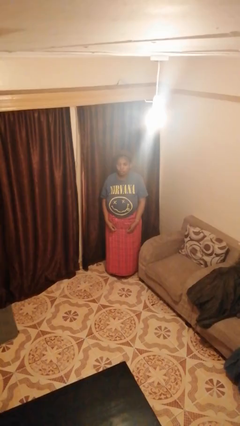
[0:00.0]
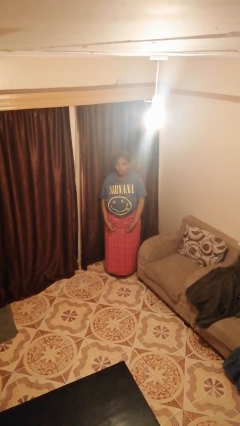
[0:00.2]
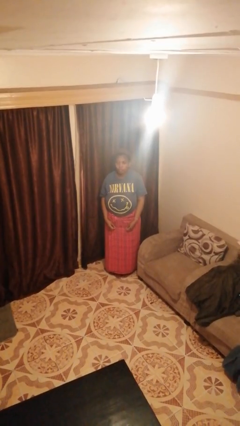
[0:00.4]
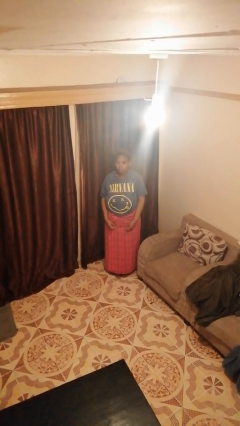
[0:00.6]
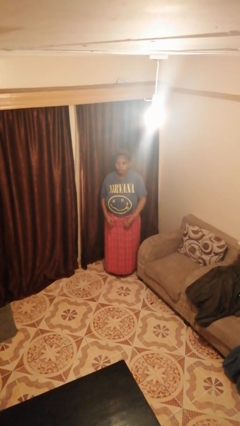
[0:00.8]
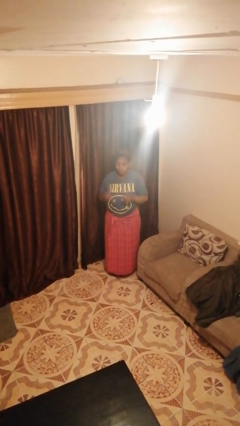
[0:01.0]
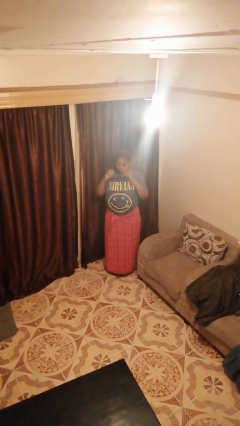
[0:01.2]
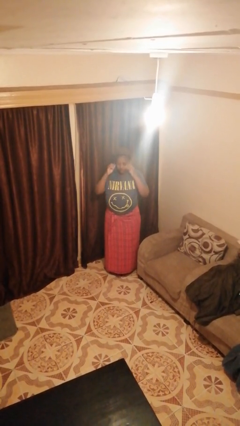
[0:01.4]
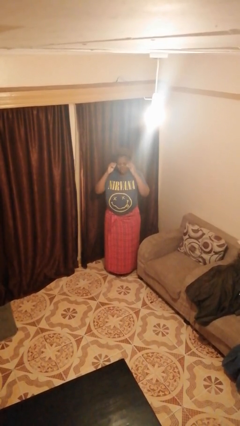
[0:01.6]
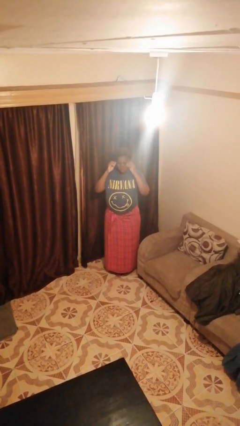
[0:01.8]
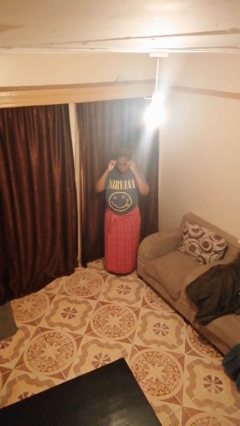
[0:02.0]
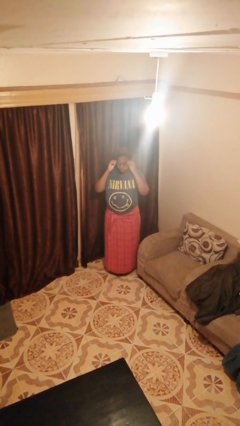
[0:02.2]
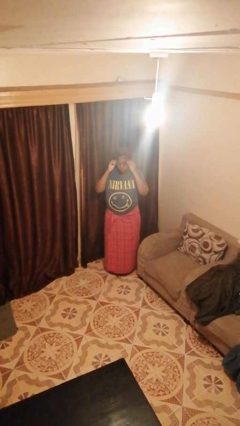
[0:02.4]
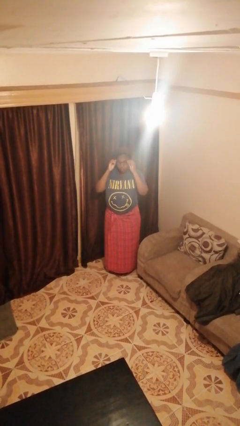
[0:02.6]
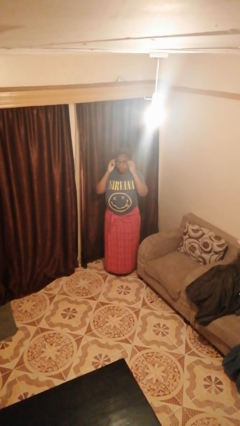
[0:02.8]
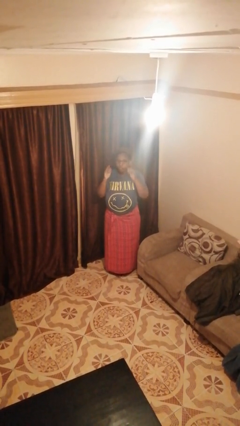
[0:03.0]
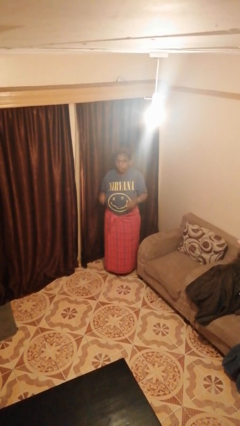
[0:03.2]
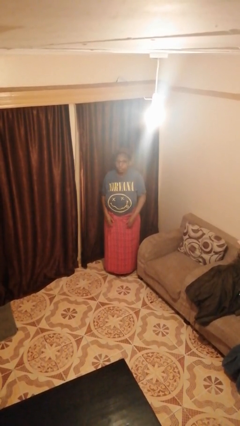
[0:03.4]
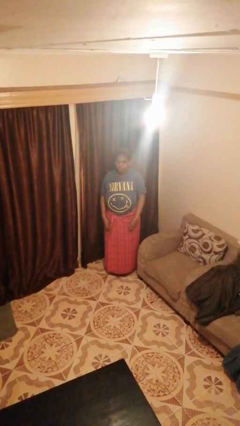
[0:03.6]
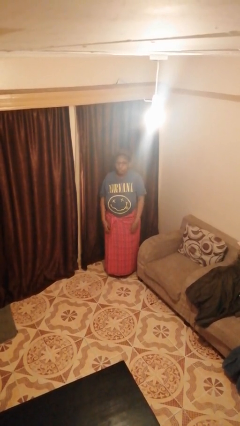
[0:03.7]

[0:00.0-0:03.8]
person puts on glasses

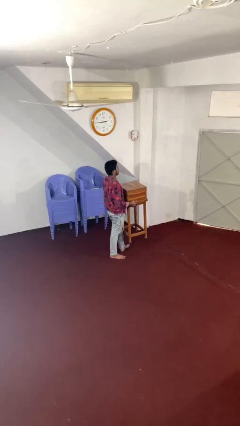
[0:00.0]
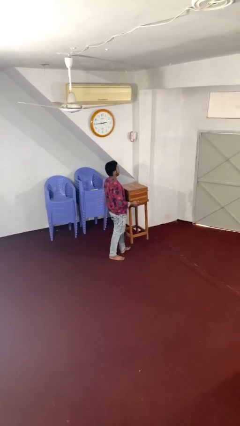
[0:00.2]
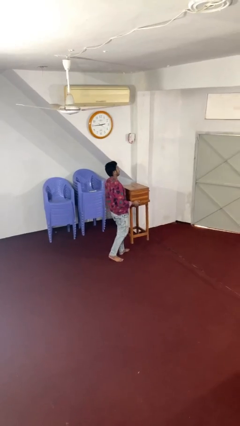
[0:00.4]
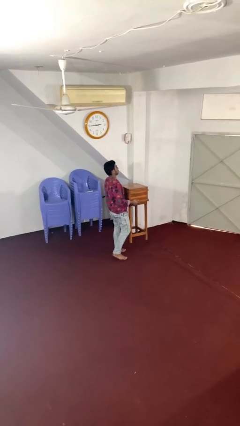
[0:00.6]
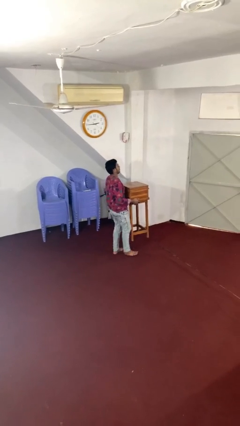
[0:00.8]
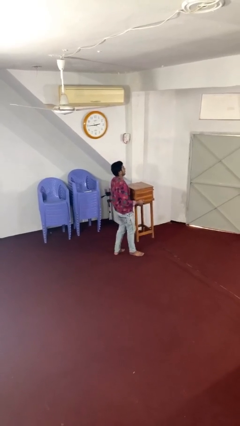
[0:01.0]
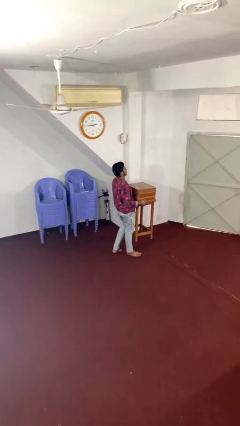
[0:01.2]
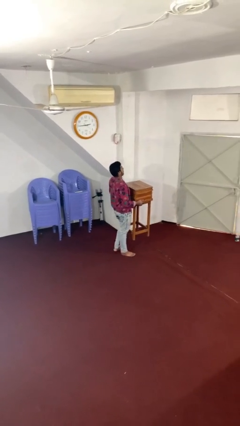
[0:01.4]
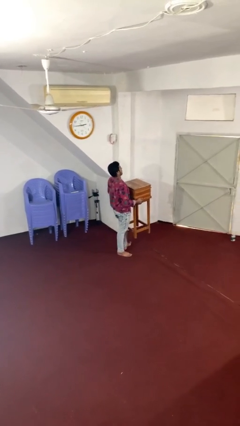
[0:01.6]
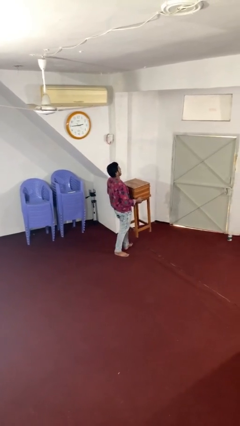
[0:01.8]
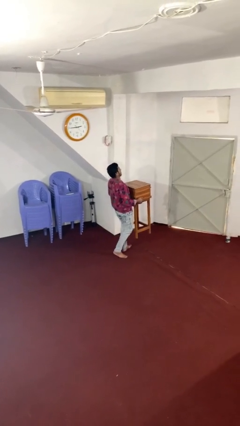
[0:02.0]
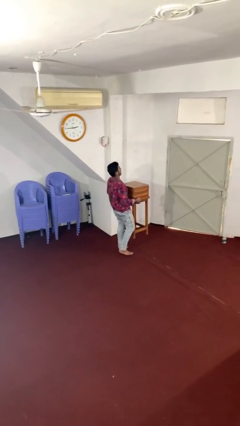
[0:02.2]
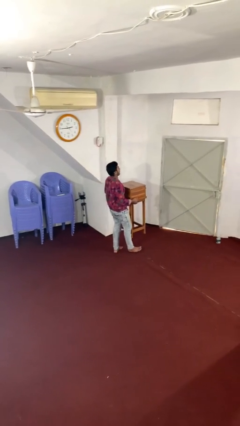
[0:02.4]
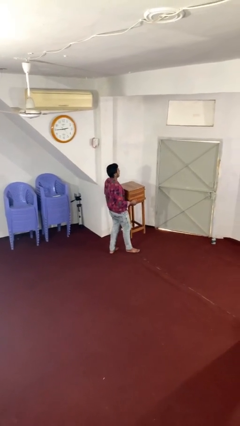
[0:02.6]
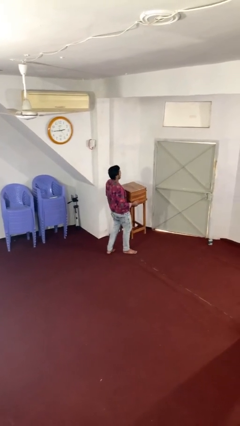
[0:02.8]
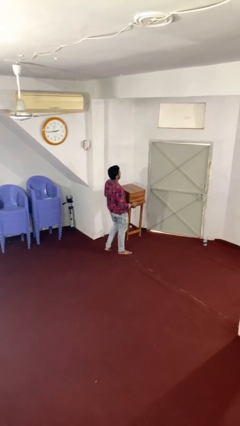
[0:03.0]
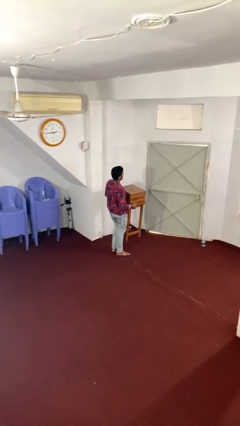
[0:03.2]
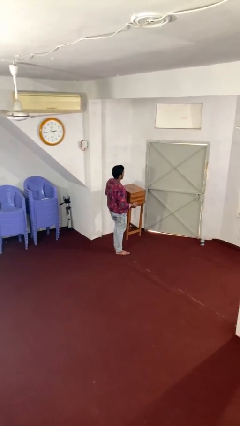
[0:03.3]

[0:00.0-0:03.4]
person carries heavy object

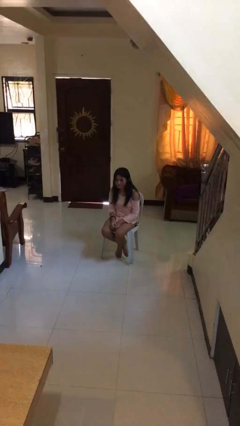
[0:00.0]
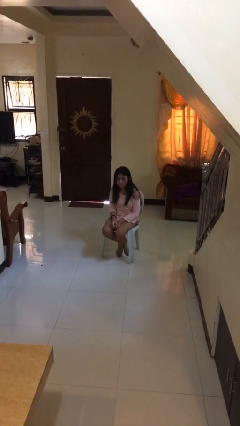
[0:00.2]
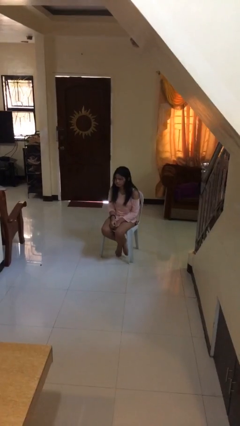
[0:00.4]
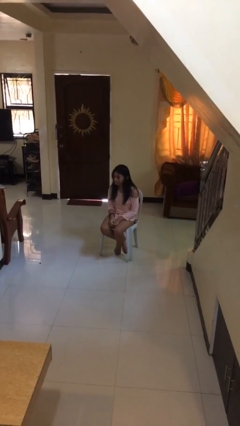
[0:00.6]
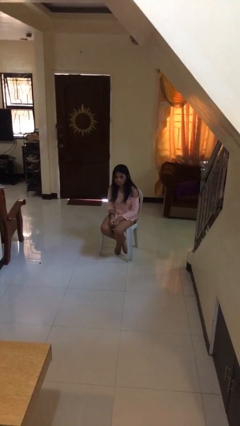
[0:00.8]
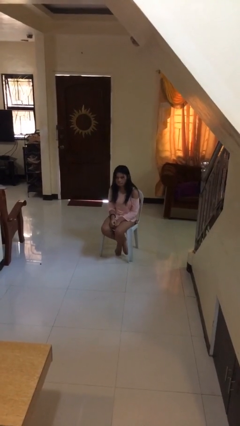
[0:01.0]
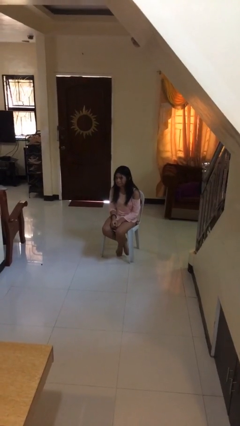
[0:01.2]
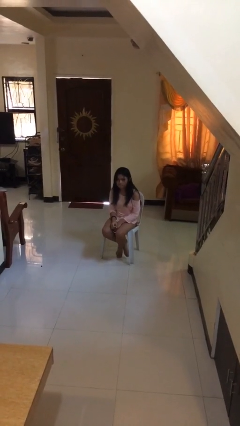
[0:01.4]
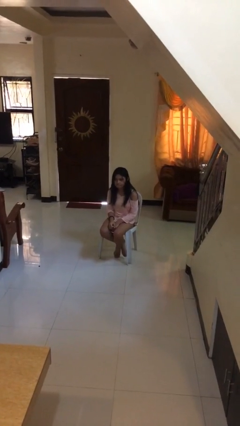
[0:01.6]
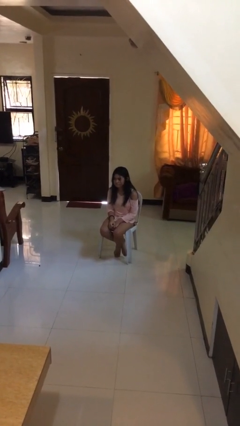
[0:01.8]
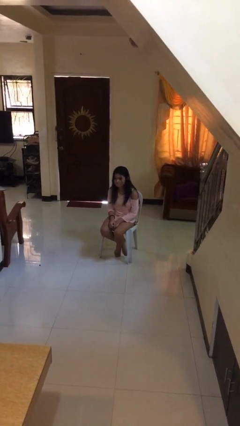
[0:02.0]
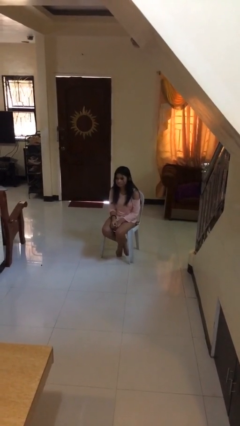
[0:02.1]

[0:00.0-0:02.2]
person shakes head

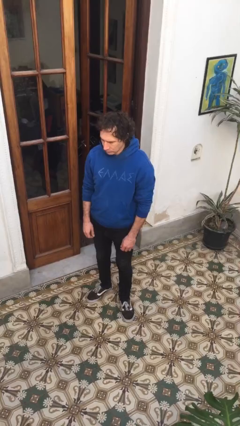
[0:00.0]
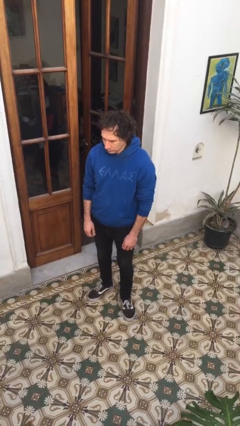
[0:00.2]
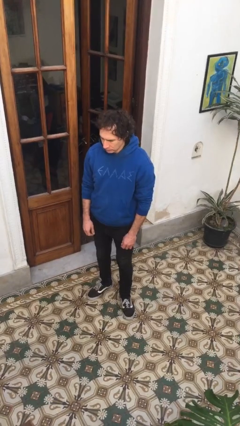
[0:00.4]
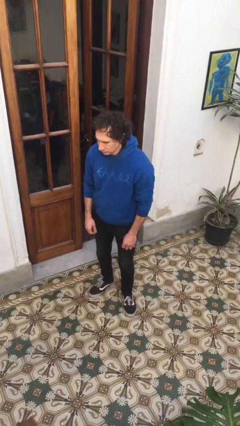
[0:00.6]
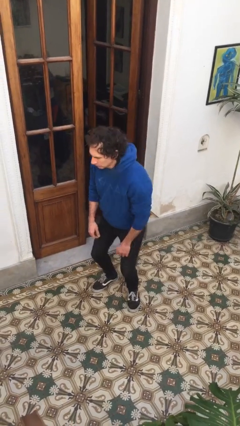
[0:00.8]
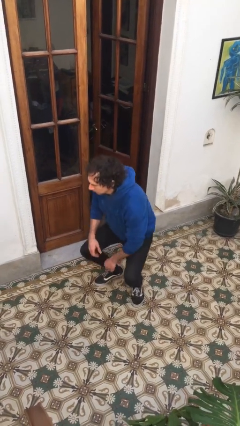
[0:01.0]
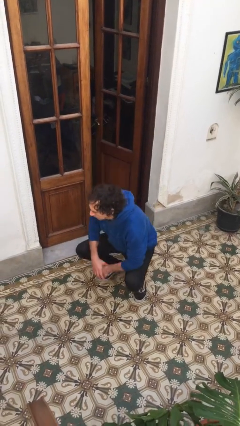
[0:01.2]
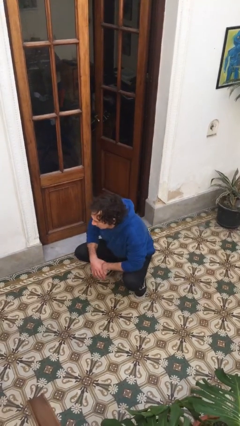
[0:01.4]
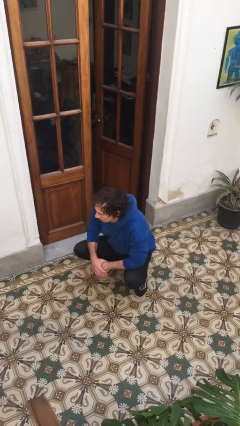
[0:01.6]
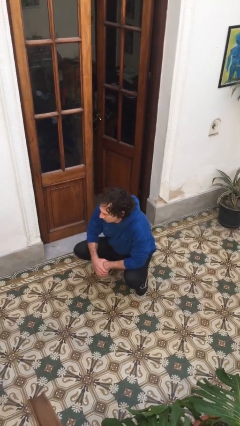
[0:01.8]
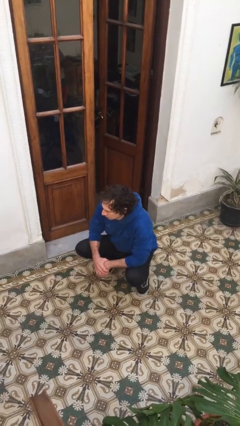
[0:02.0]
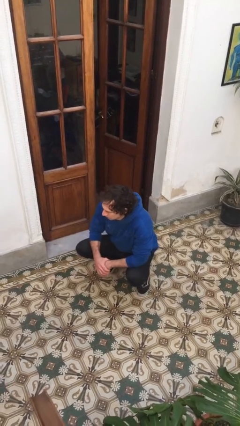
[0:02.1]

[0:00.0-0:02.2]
person squats

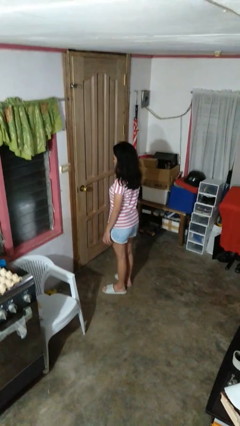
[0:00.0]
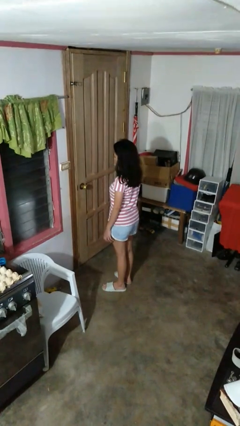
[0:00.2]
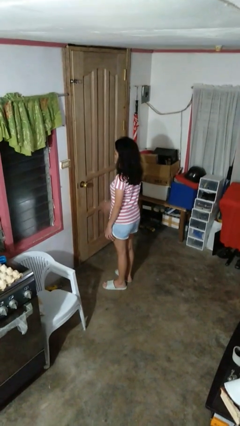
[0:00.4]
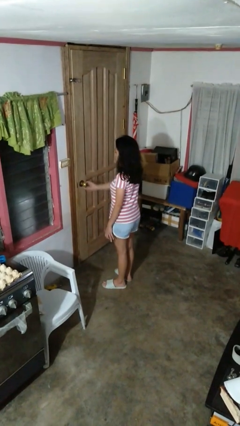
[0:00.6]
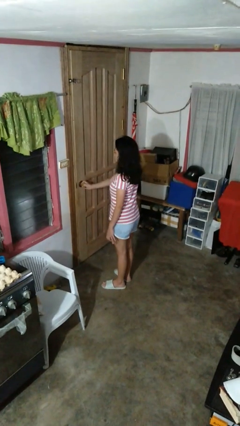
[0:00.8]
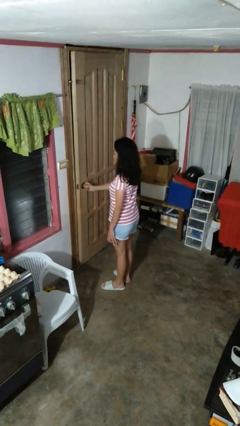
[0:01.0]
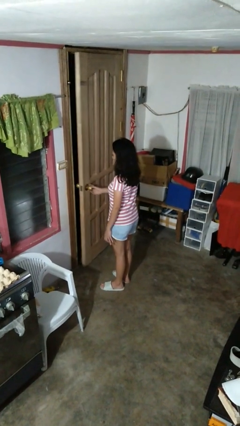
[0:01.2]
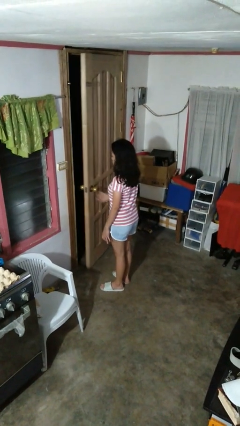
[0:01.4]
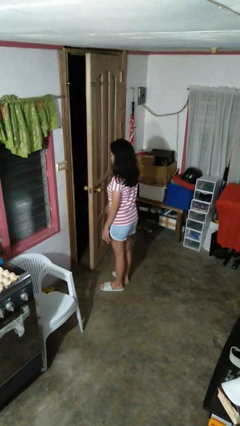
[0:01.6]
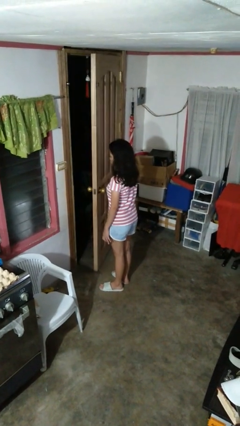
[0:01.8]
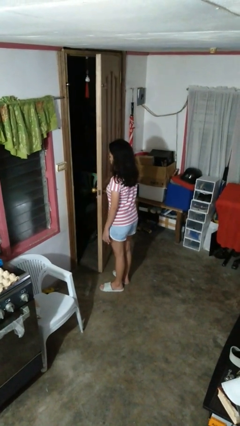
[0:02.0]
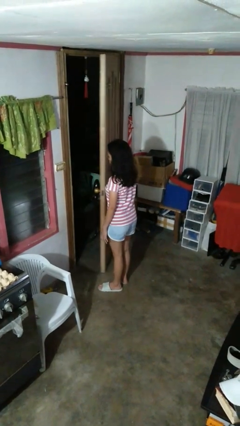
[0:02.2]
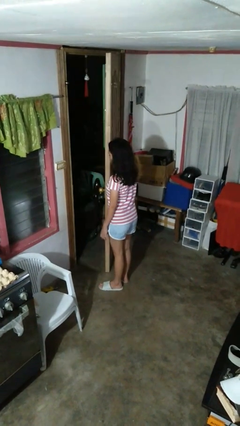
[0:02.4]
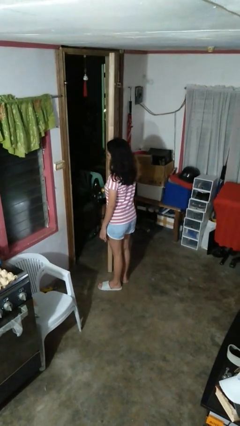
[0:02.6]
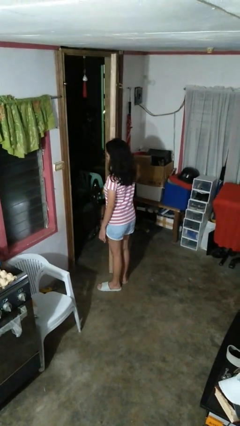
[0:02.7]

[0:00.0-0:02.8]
person opens facility door

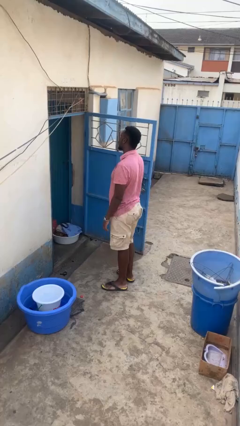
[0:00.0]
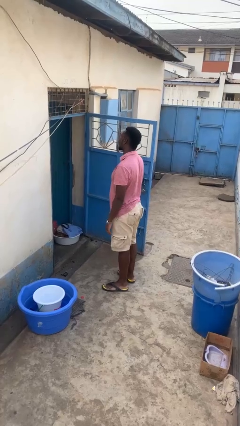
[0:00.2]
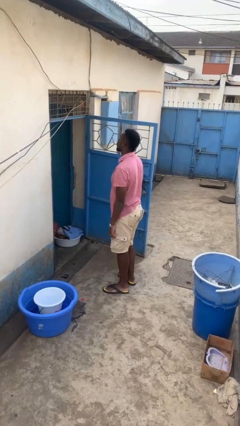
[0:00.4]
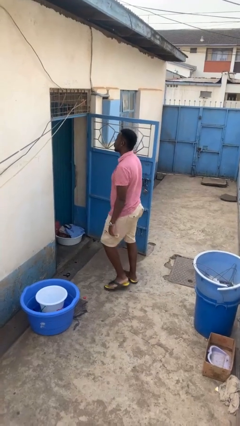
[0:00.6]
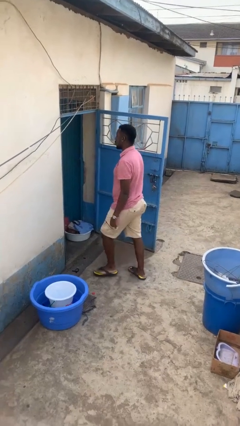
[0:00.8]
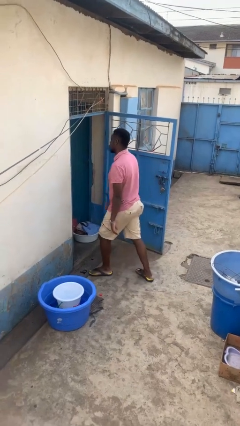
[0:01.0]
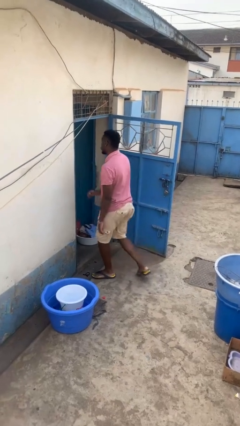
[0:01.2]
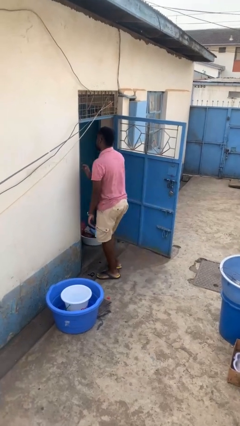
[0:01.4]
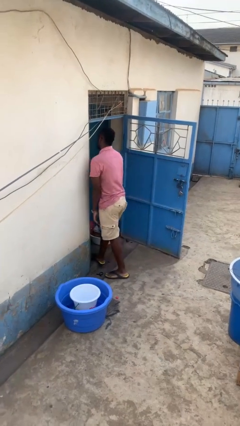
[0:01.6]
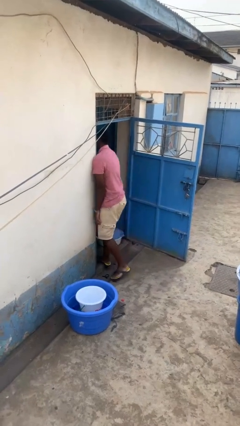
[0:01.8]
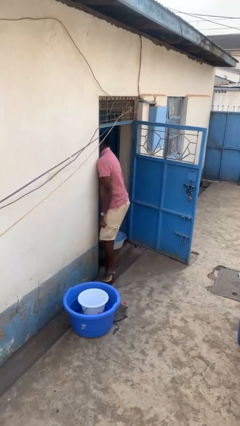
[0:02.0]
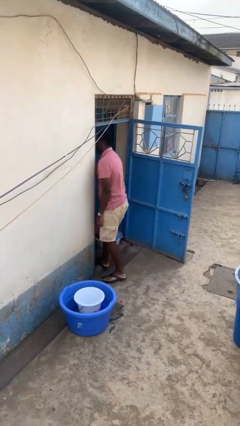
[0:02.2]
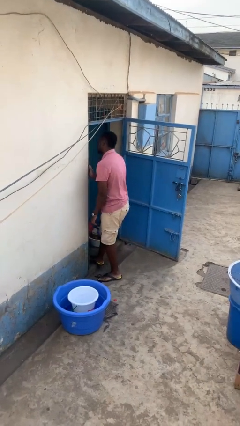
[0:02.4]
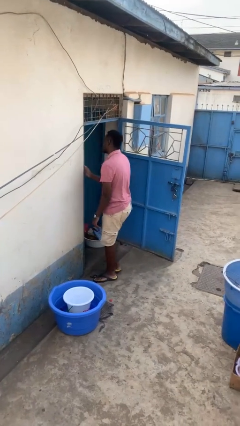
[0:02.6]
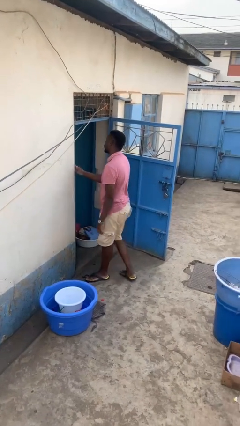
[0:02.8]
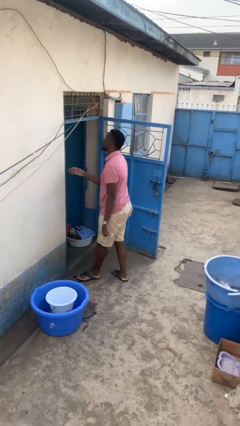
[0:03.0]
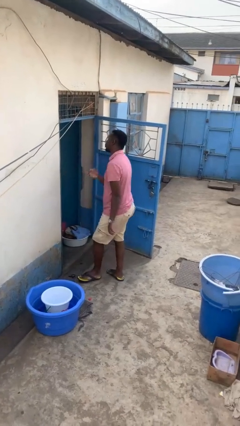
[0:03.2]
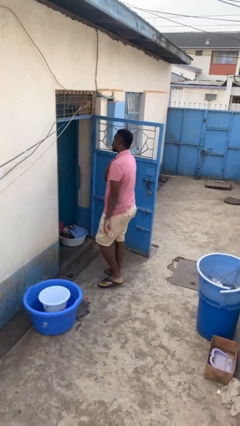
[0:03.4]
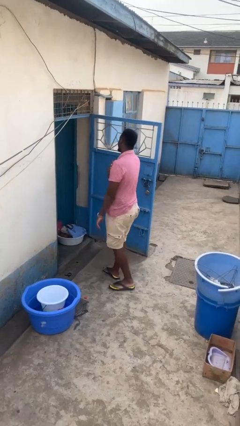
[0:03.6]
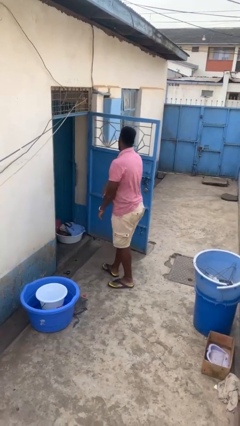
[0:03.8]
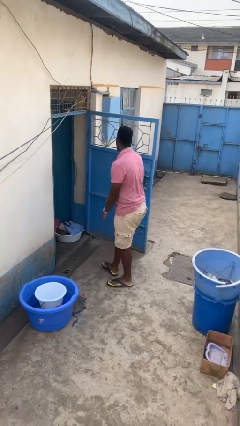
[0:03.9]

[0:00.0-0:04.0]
person bumps into wall
